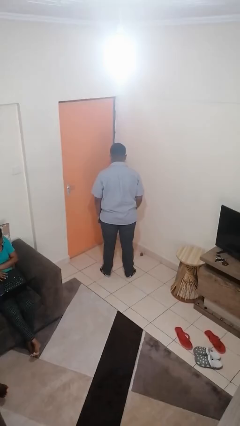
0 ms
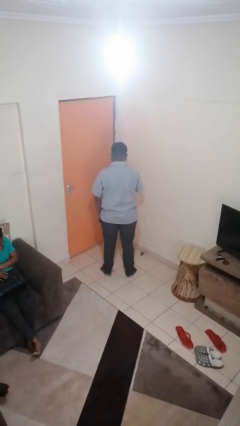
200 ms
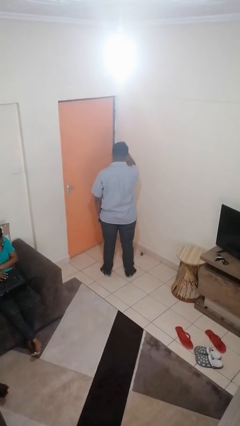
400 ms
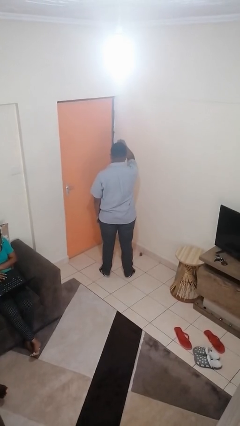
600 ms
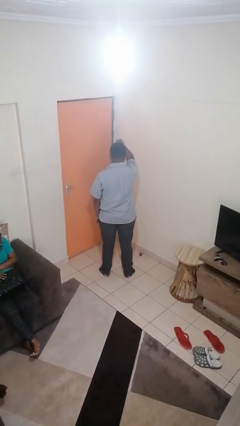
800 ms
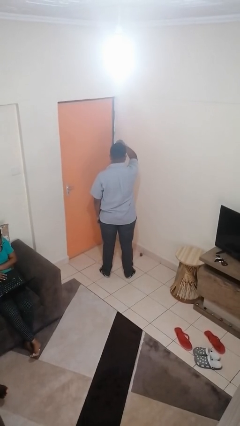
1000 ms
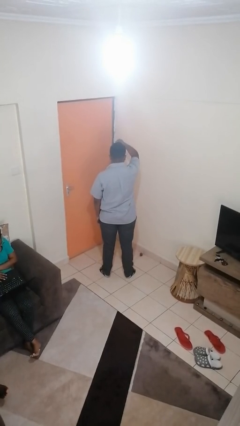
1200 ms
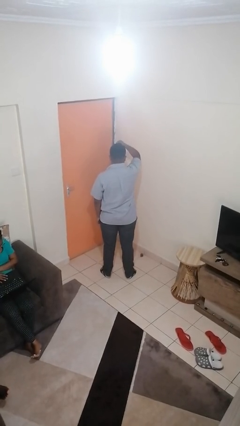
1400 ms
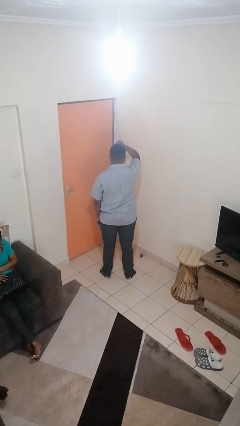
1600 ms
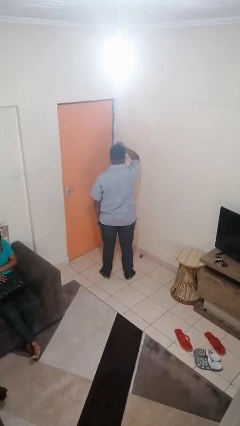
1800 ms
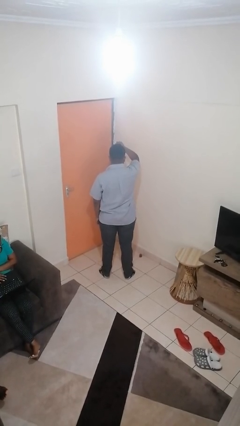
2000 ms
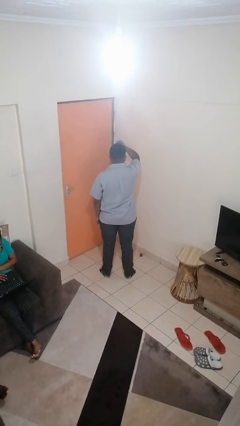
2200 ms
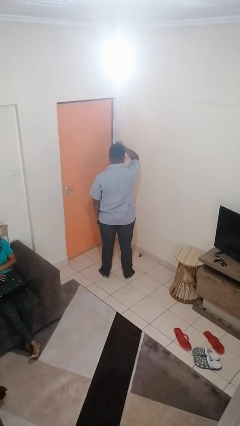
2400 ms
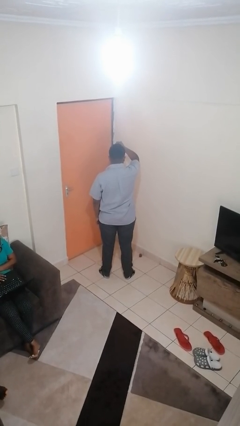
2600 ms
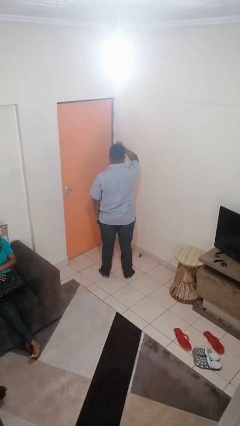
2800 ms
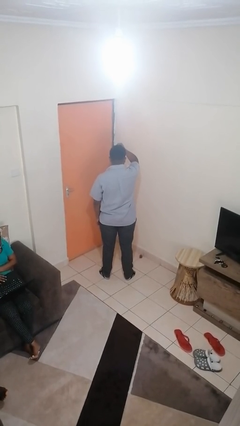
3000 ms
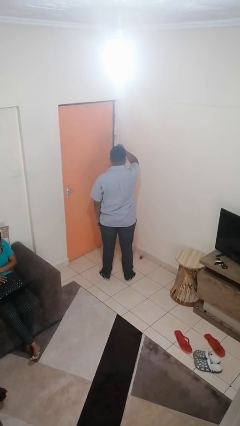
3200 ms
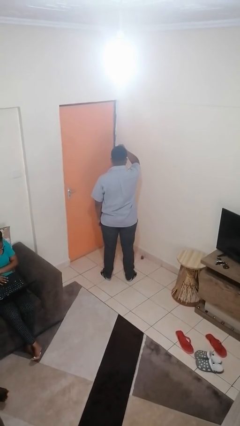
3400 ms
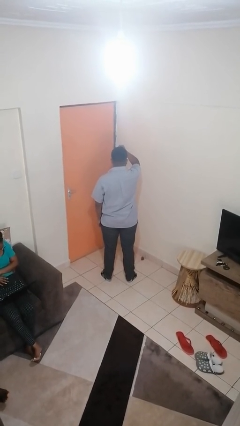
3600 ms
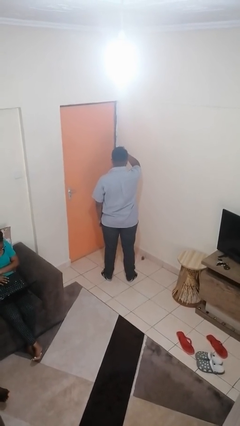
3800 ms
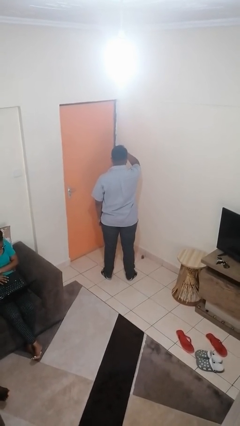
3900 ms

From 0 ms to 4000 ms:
person scratches face

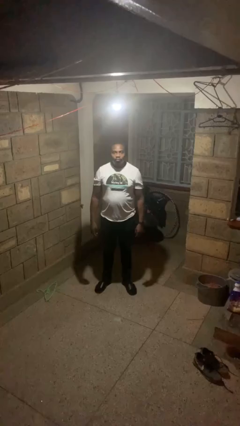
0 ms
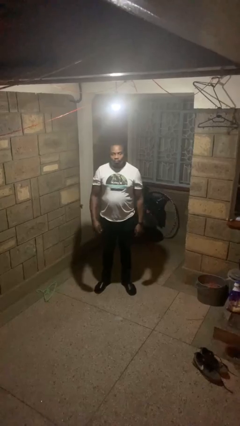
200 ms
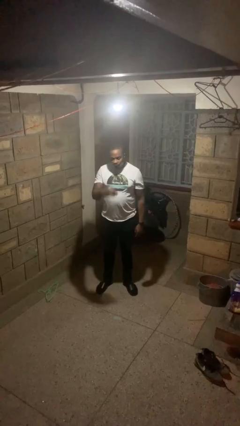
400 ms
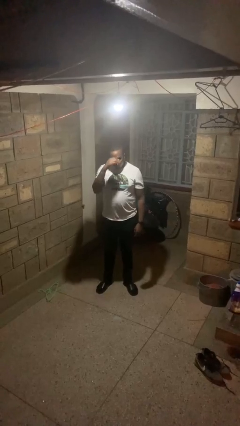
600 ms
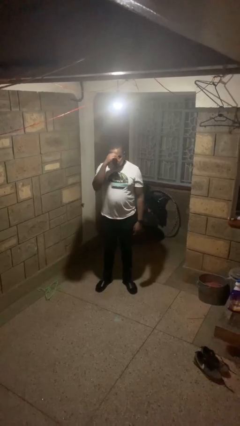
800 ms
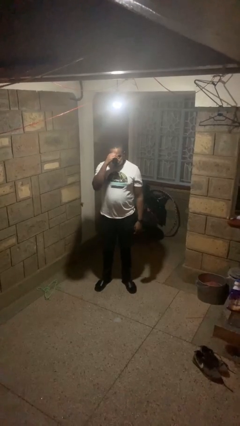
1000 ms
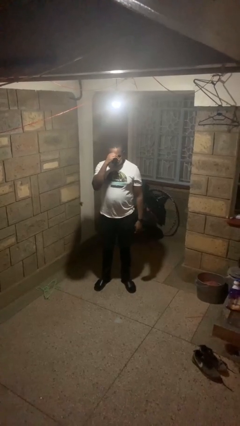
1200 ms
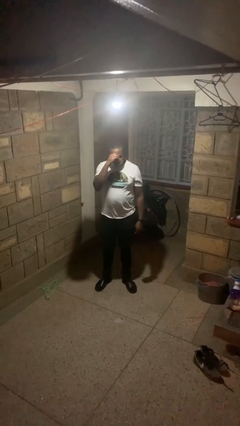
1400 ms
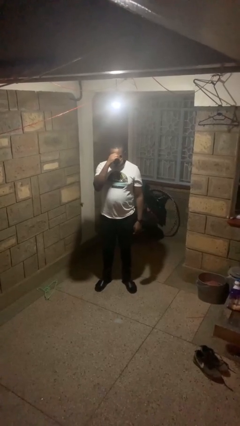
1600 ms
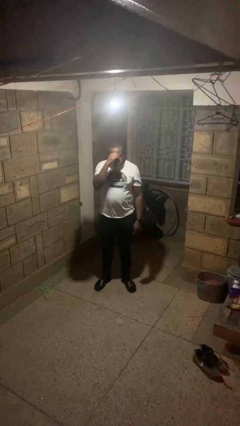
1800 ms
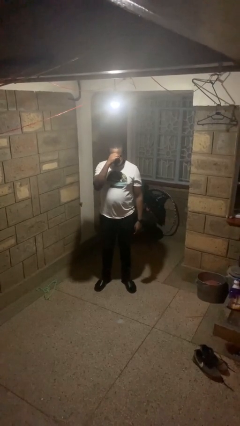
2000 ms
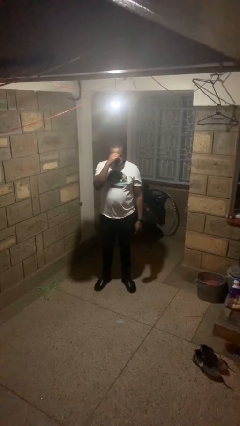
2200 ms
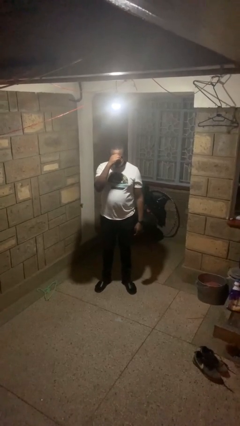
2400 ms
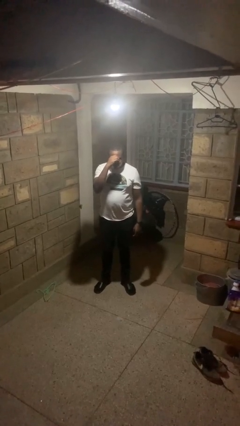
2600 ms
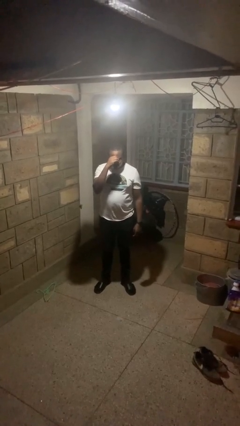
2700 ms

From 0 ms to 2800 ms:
person shades eyes

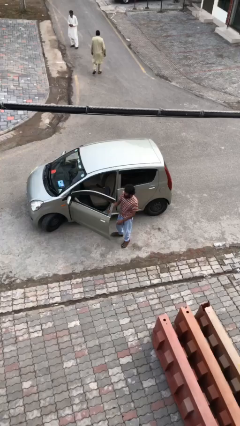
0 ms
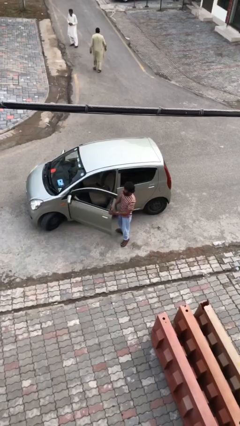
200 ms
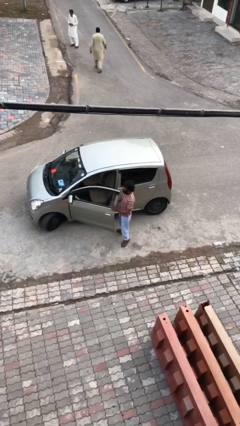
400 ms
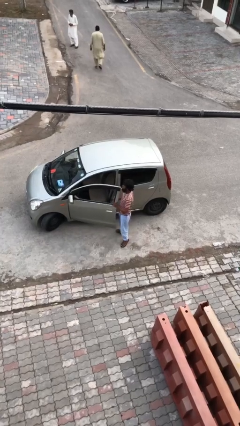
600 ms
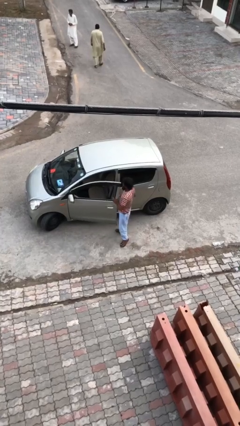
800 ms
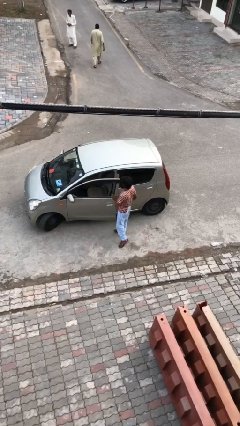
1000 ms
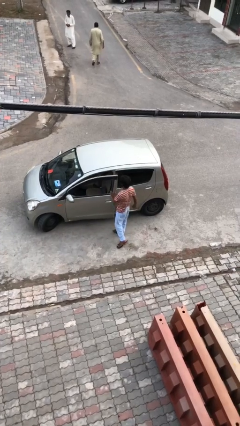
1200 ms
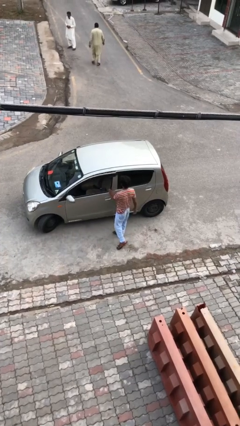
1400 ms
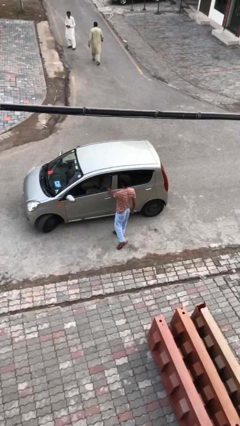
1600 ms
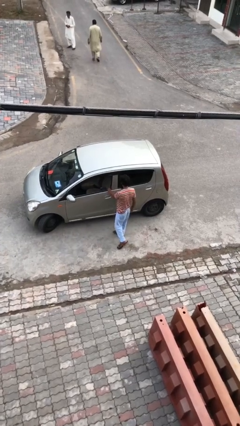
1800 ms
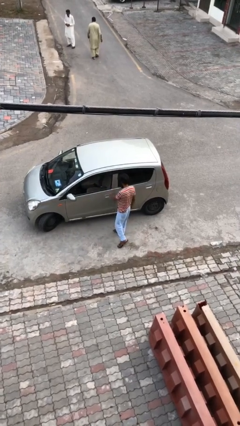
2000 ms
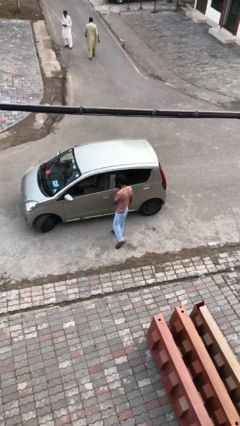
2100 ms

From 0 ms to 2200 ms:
person closes car door

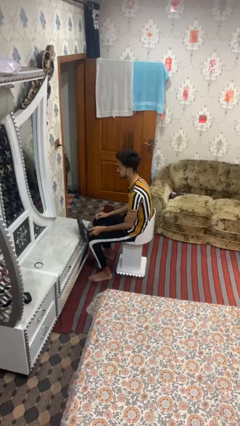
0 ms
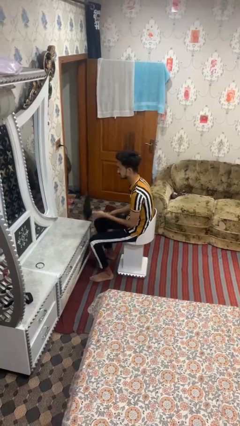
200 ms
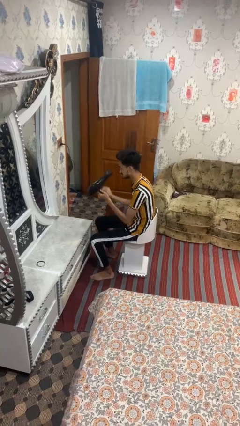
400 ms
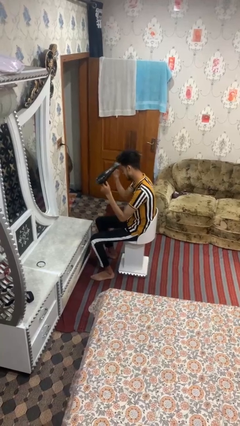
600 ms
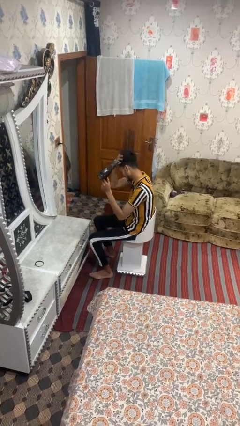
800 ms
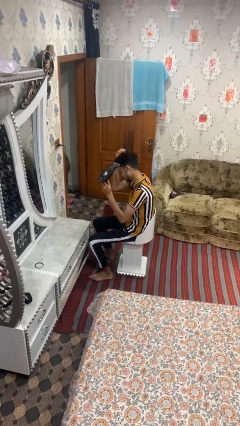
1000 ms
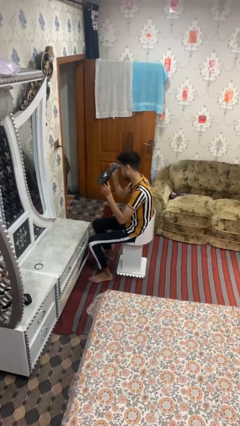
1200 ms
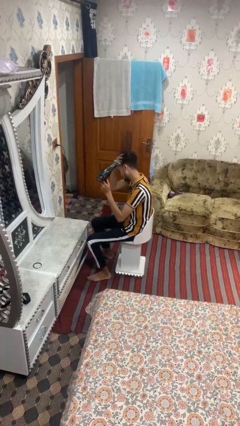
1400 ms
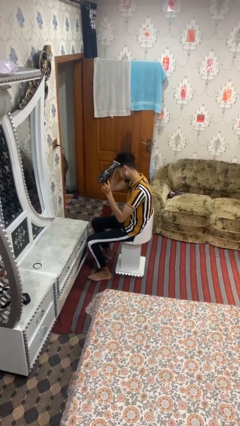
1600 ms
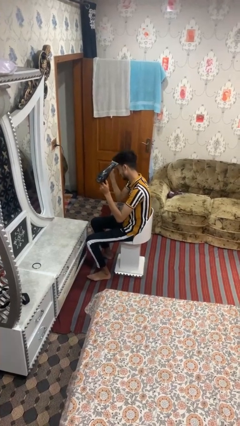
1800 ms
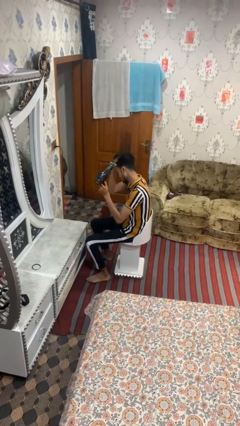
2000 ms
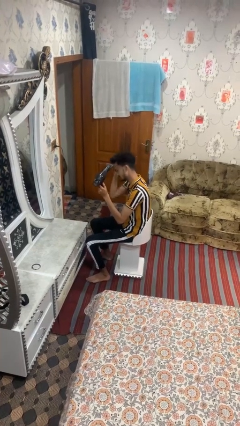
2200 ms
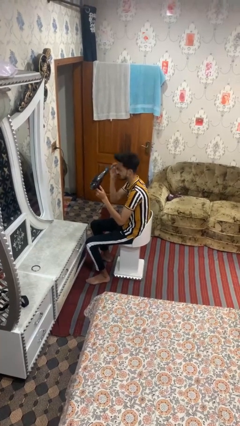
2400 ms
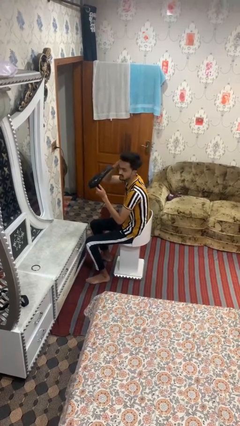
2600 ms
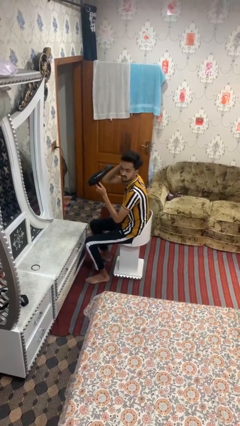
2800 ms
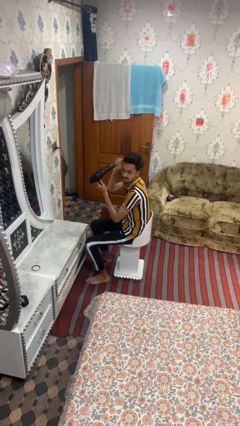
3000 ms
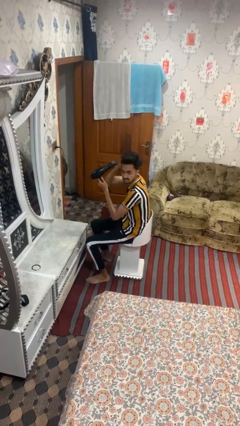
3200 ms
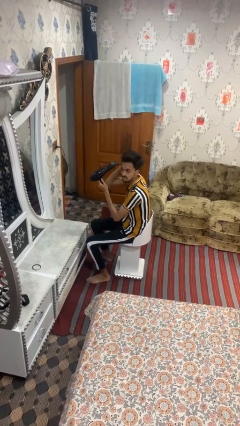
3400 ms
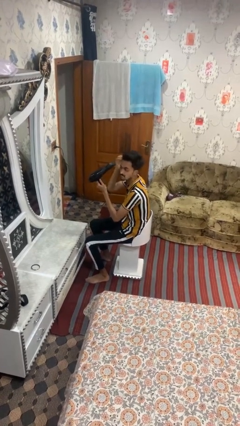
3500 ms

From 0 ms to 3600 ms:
person dries hair with hairdryer

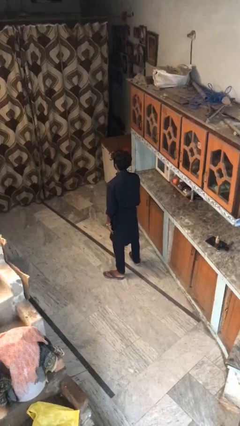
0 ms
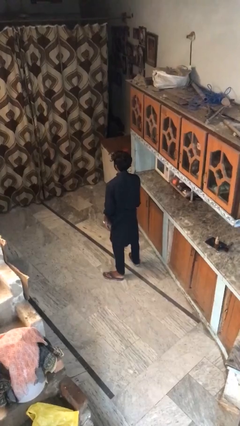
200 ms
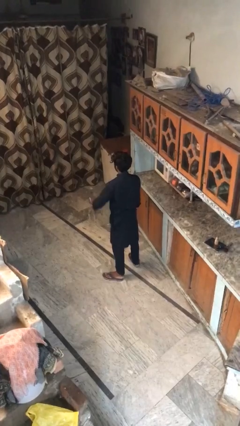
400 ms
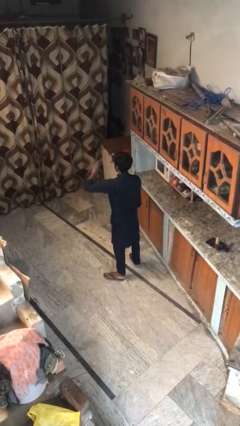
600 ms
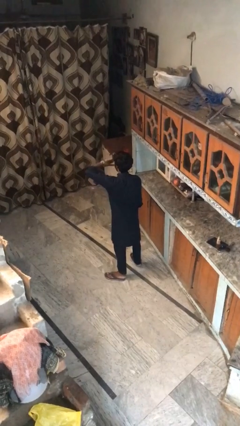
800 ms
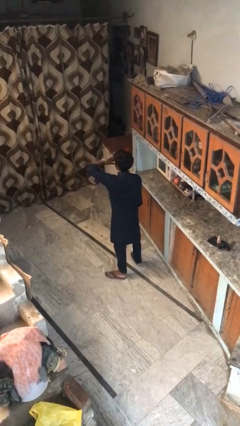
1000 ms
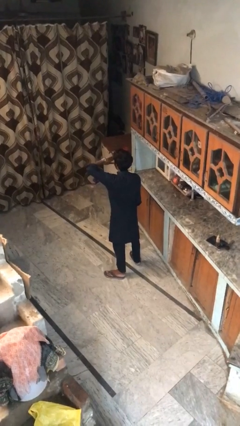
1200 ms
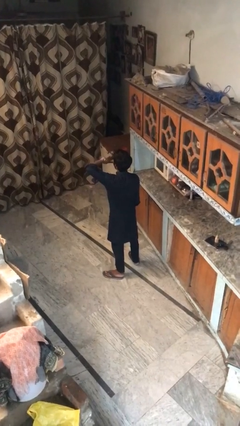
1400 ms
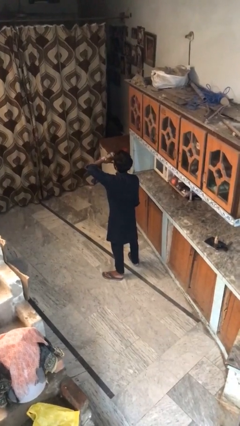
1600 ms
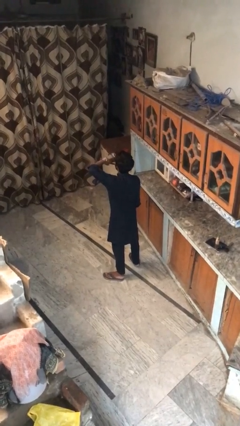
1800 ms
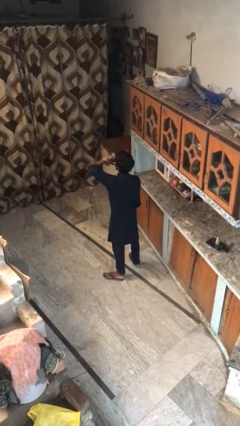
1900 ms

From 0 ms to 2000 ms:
person yawns

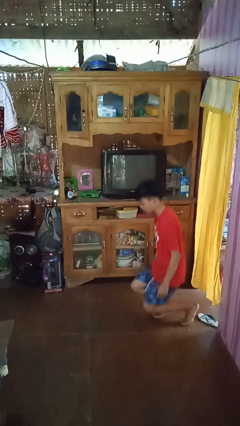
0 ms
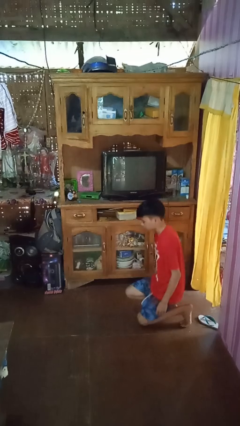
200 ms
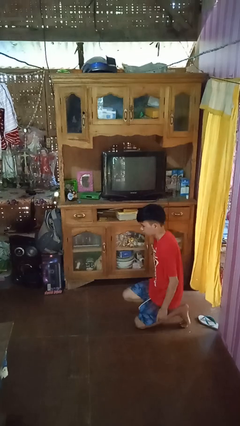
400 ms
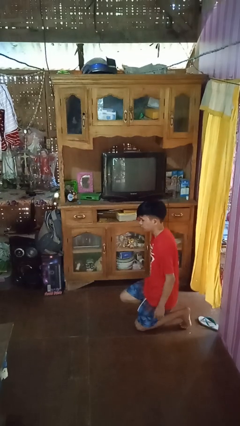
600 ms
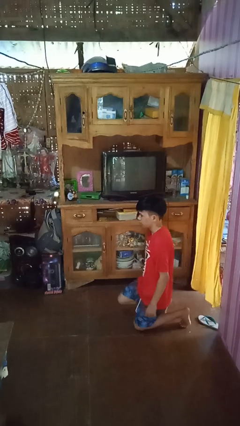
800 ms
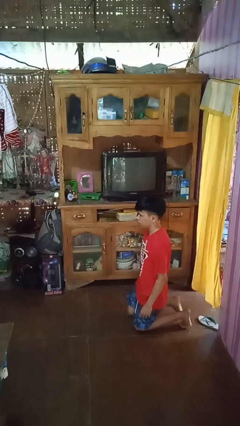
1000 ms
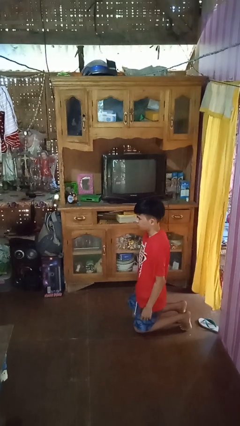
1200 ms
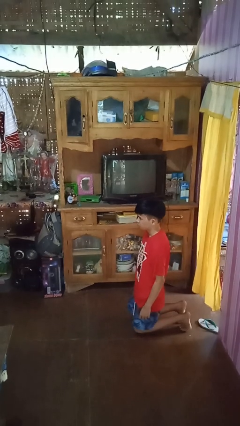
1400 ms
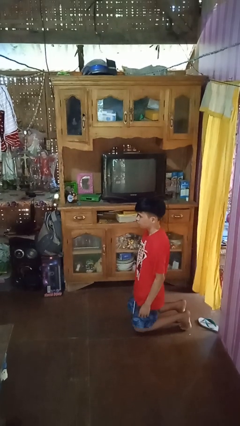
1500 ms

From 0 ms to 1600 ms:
person kneels

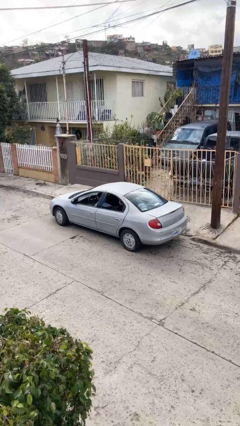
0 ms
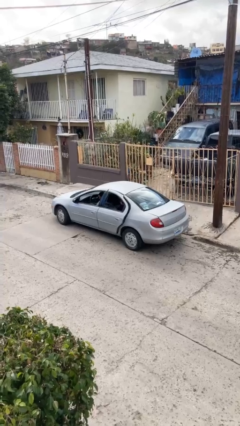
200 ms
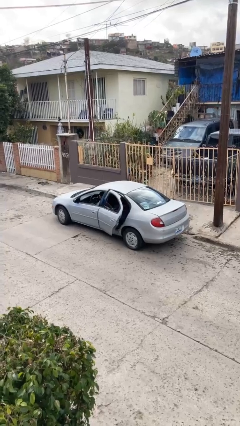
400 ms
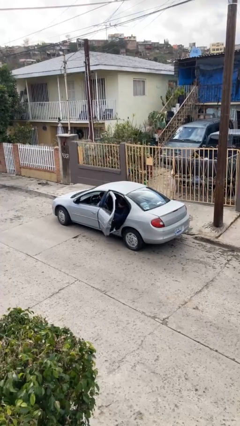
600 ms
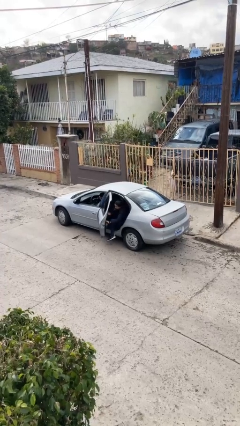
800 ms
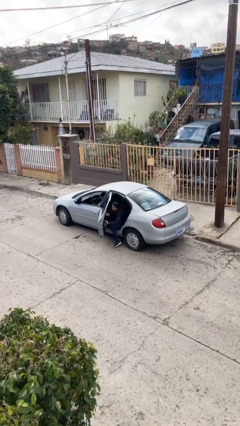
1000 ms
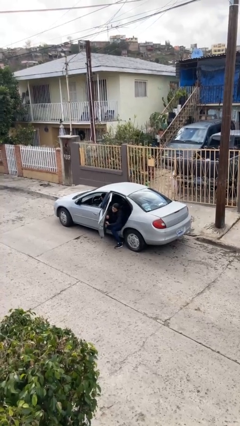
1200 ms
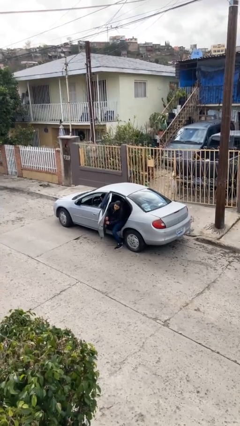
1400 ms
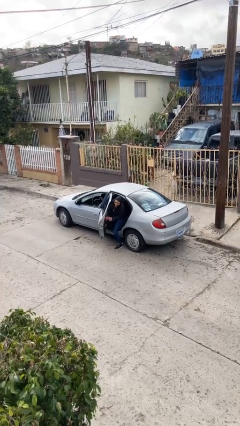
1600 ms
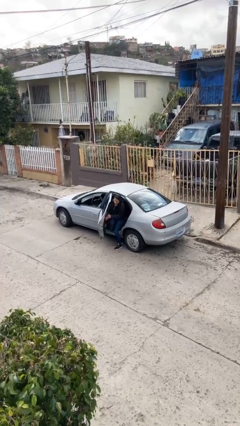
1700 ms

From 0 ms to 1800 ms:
car drops off person
